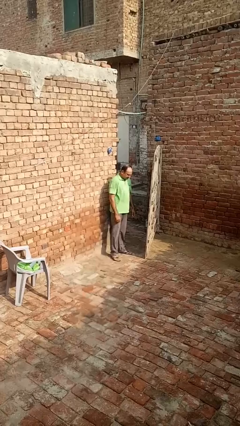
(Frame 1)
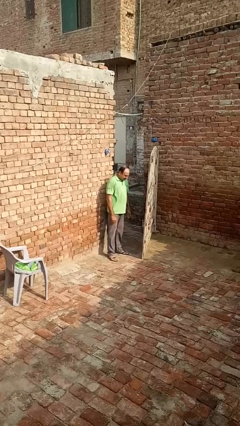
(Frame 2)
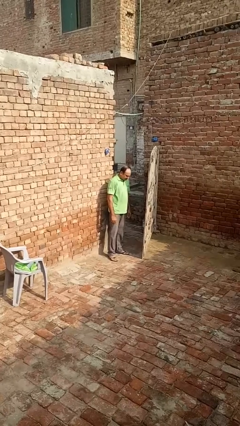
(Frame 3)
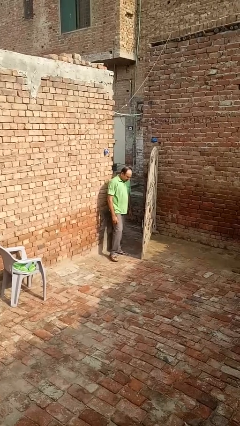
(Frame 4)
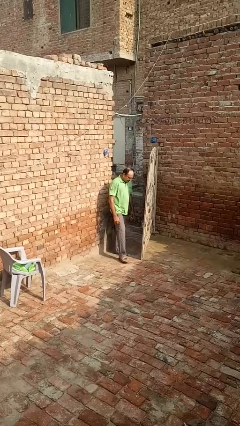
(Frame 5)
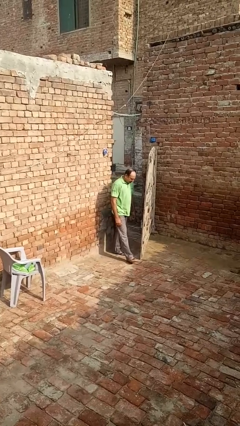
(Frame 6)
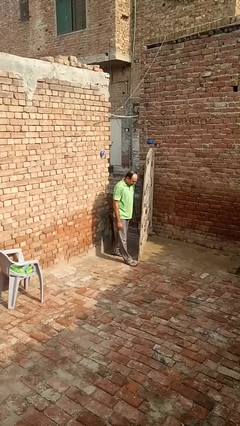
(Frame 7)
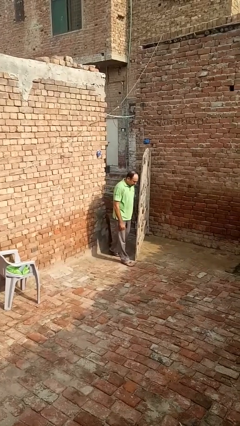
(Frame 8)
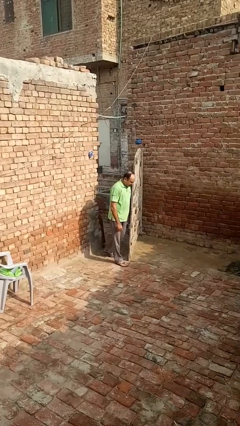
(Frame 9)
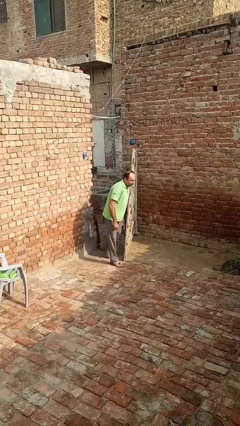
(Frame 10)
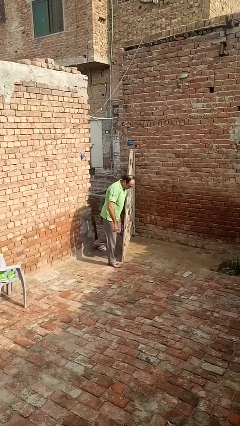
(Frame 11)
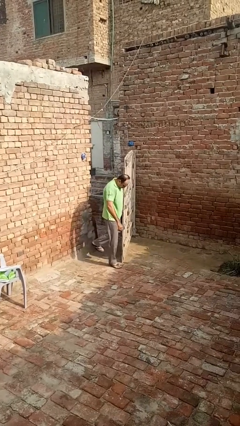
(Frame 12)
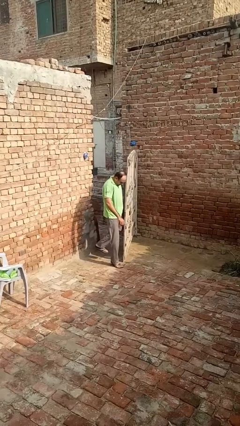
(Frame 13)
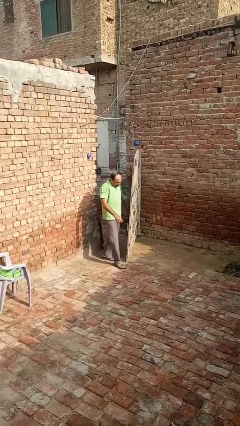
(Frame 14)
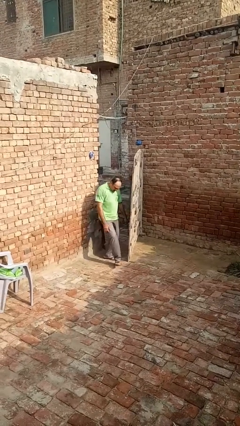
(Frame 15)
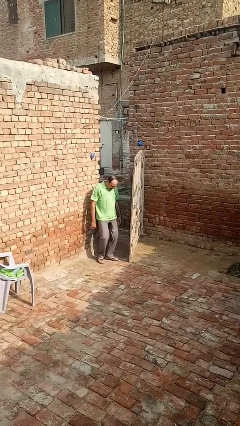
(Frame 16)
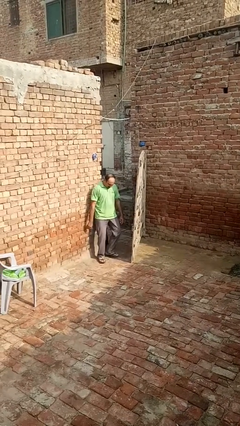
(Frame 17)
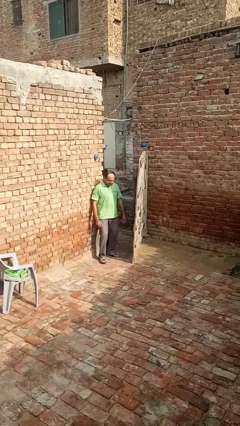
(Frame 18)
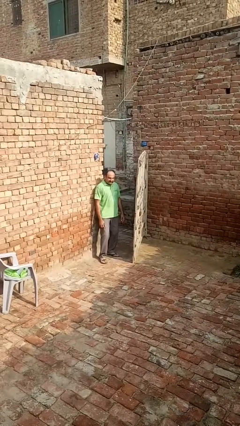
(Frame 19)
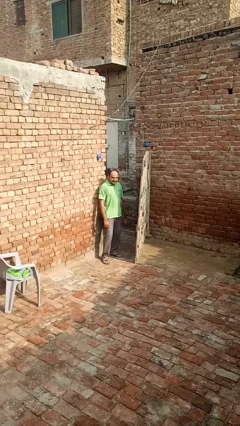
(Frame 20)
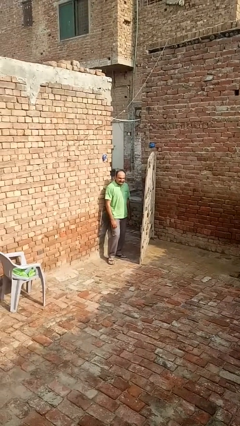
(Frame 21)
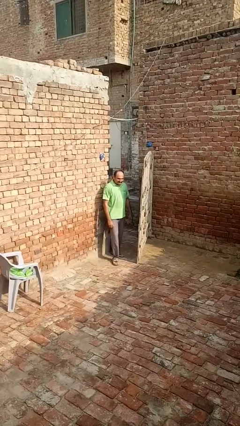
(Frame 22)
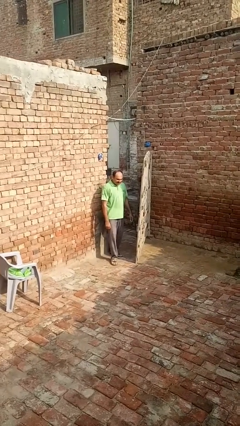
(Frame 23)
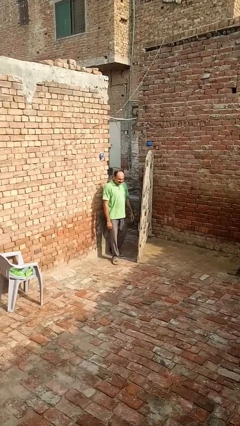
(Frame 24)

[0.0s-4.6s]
person bumps into wall

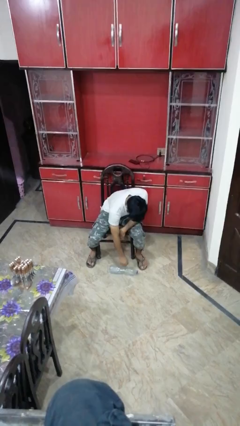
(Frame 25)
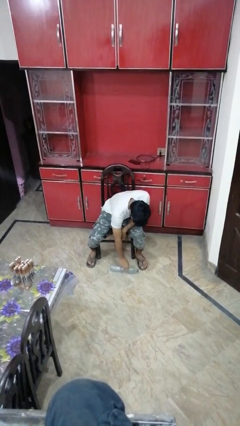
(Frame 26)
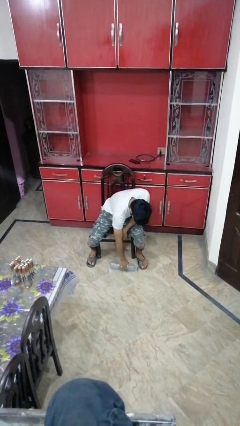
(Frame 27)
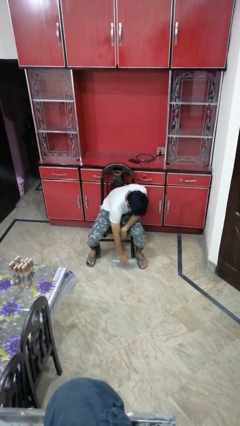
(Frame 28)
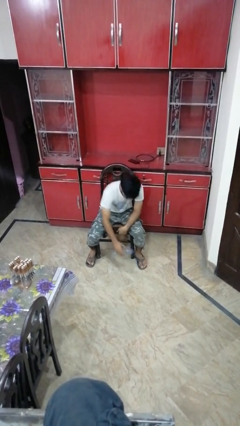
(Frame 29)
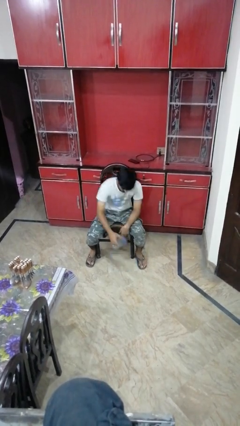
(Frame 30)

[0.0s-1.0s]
person picks up object from floor

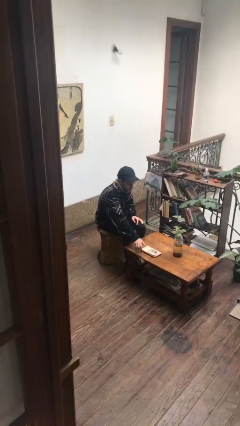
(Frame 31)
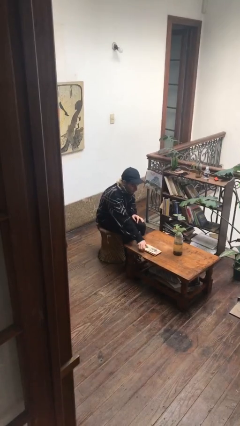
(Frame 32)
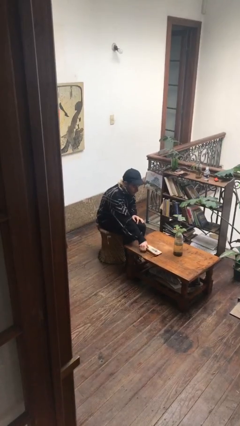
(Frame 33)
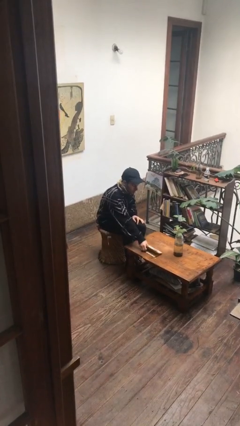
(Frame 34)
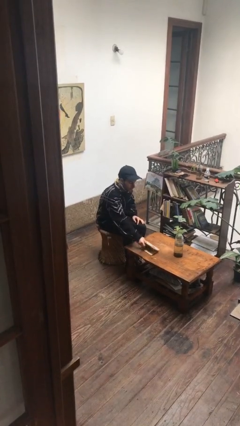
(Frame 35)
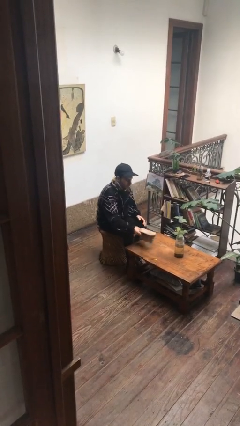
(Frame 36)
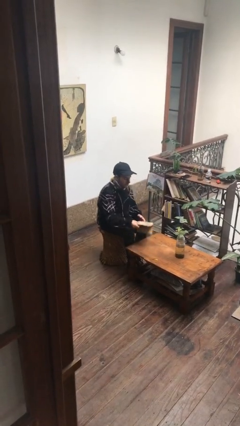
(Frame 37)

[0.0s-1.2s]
person picks up object from table

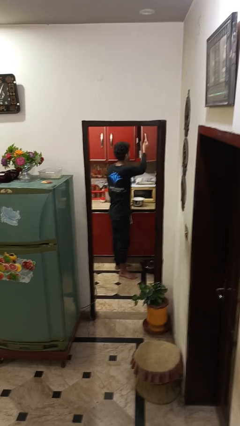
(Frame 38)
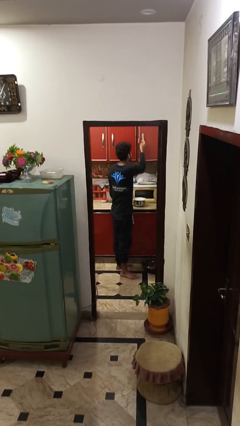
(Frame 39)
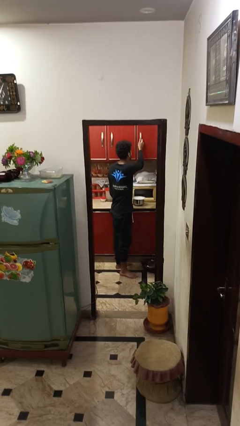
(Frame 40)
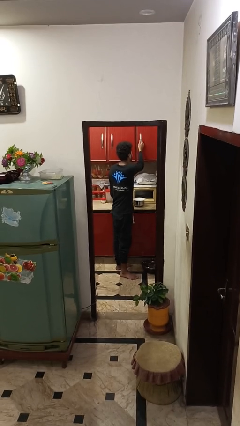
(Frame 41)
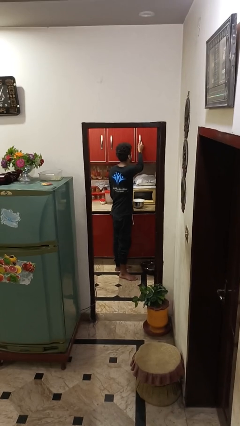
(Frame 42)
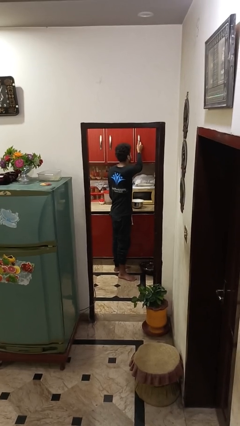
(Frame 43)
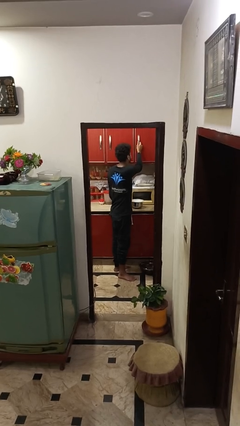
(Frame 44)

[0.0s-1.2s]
person closes cabinet

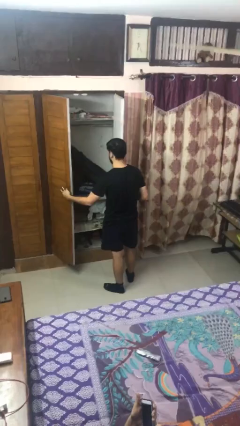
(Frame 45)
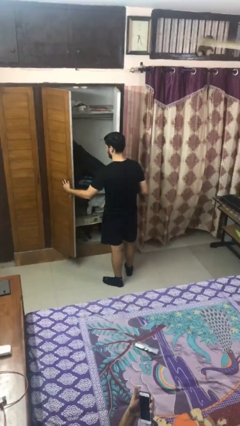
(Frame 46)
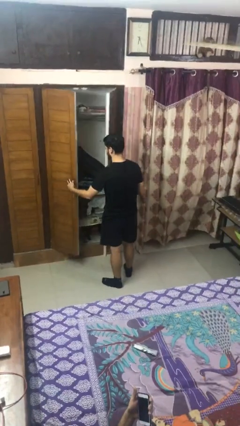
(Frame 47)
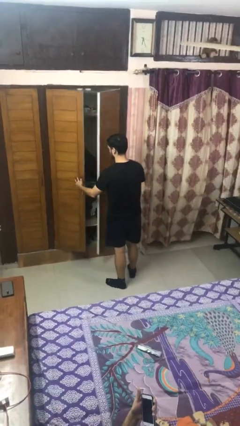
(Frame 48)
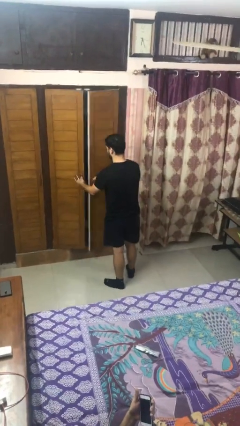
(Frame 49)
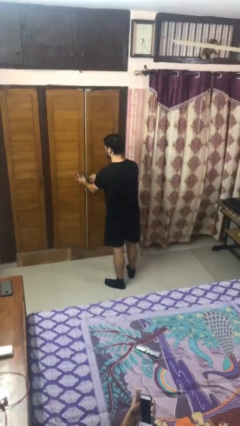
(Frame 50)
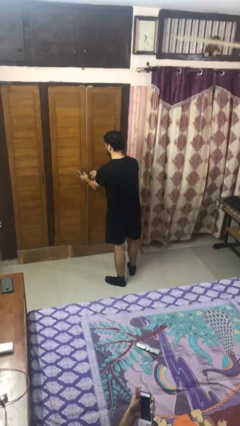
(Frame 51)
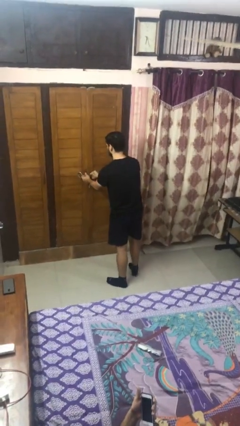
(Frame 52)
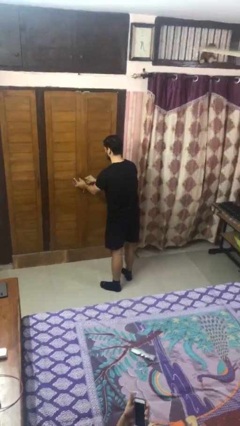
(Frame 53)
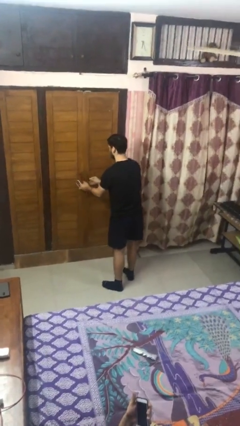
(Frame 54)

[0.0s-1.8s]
person closes facility door

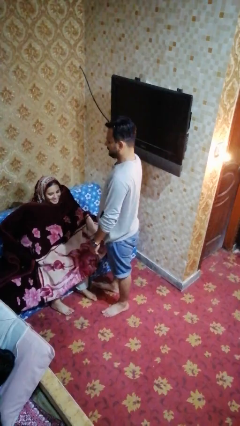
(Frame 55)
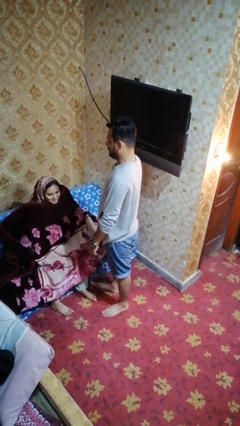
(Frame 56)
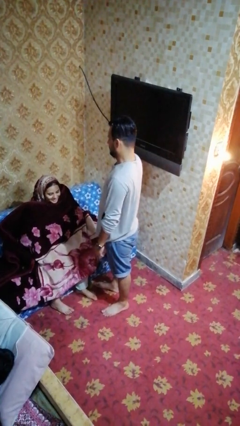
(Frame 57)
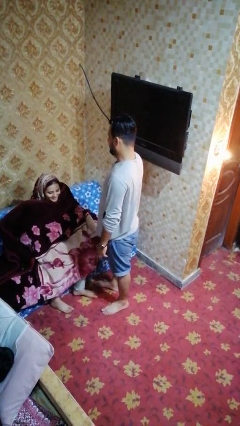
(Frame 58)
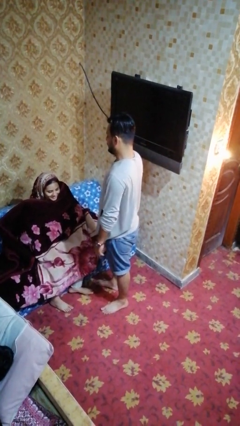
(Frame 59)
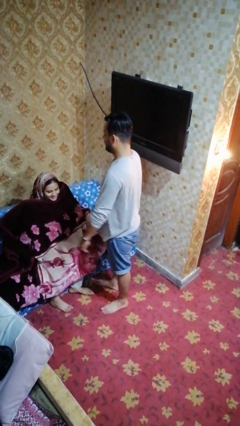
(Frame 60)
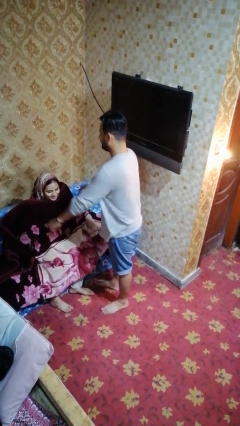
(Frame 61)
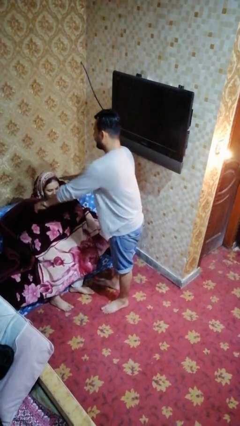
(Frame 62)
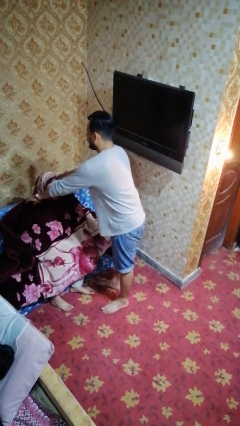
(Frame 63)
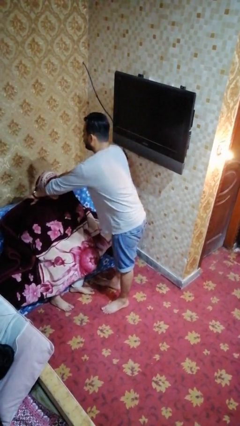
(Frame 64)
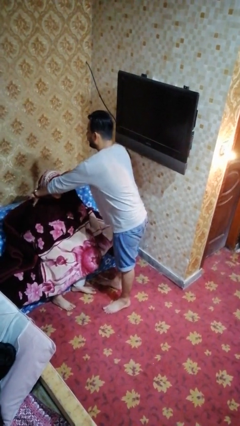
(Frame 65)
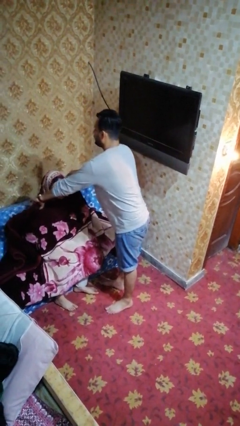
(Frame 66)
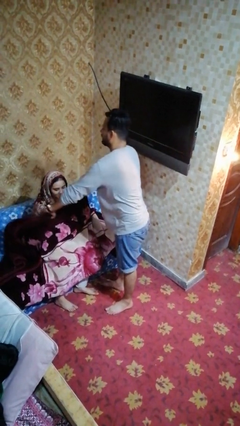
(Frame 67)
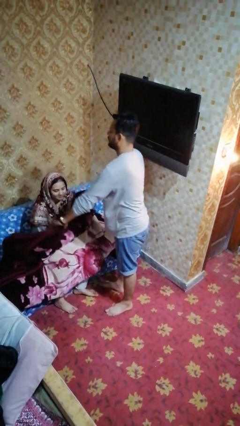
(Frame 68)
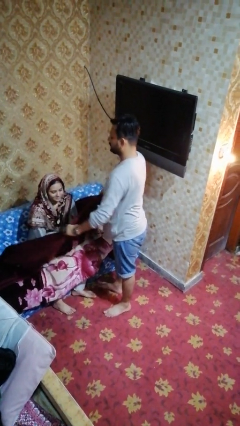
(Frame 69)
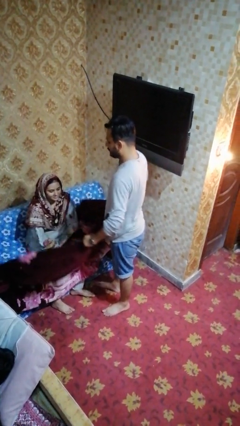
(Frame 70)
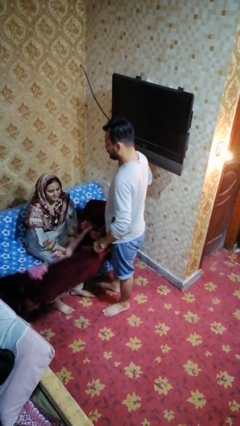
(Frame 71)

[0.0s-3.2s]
person uncovers friend with blanket

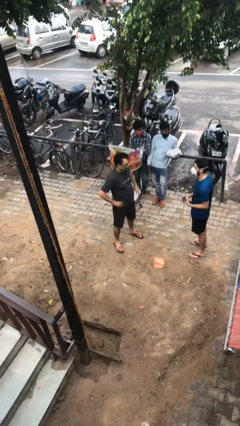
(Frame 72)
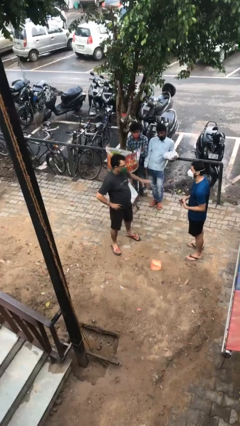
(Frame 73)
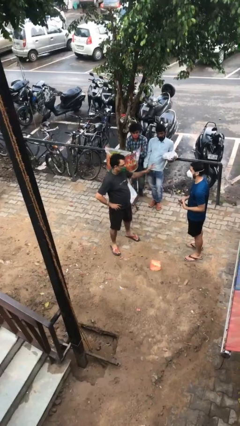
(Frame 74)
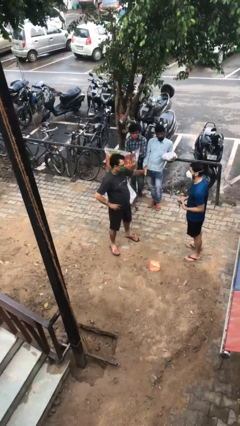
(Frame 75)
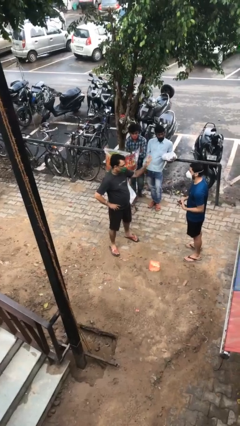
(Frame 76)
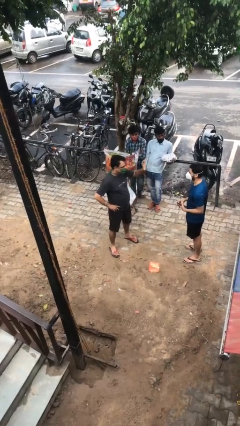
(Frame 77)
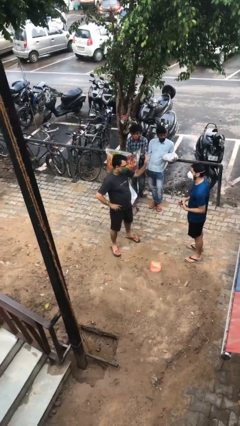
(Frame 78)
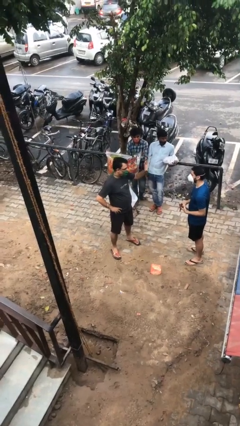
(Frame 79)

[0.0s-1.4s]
person waves at person

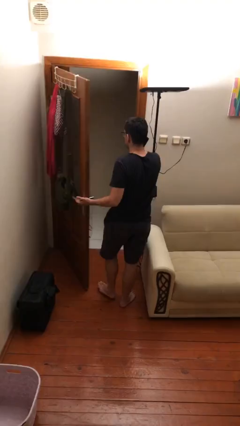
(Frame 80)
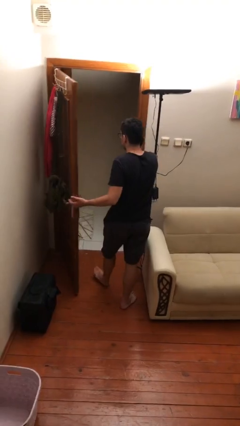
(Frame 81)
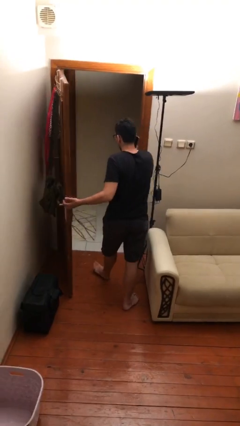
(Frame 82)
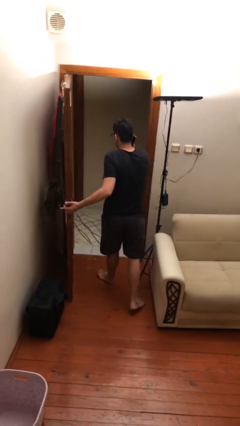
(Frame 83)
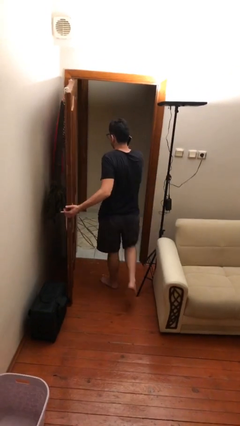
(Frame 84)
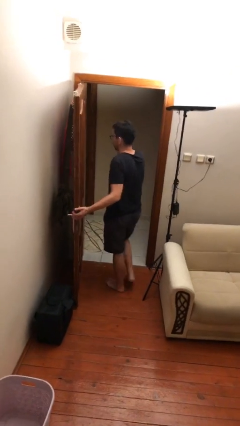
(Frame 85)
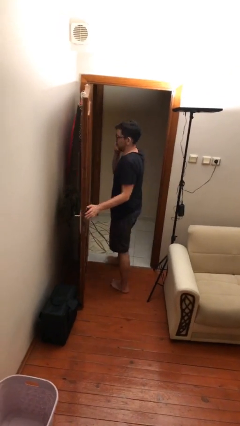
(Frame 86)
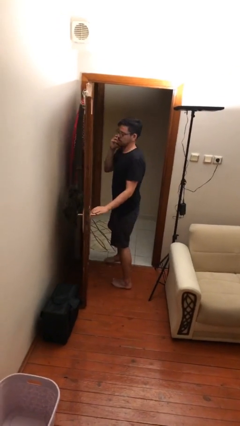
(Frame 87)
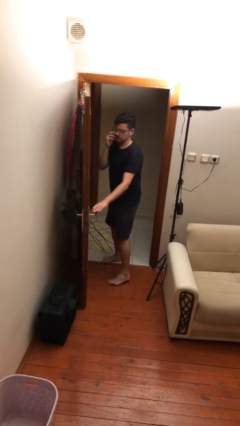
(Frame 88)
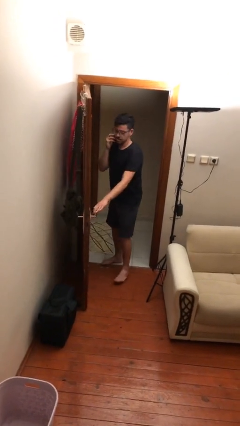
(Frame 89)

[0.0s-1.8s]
person exits scene through structure

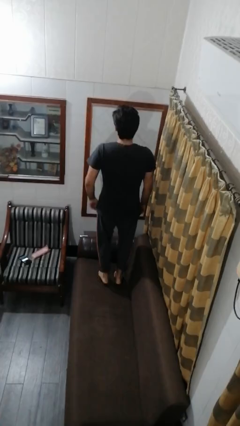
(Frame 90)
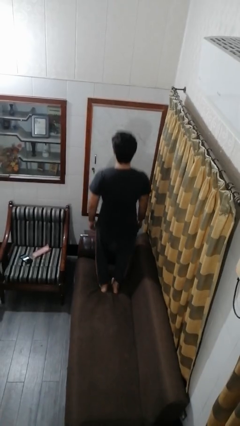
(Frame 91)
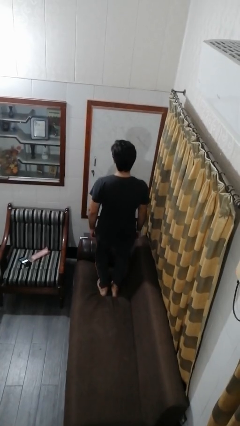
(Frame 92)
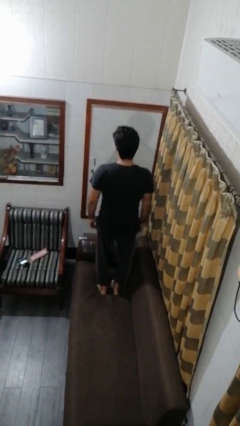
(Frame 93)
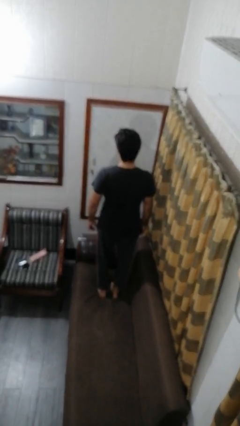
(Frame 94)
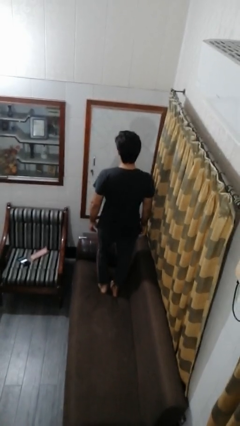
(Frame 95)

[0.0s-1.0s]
person jumps on couch
